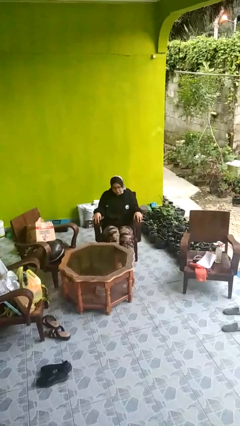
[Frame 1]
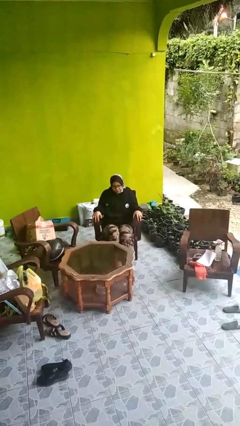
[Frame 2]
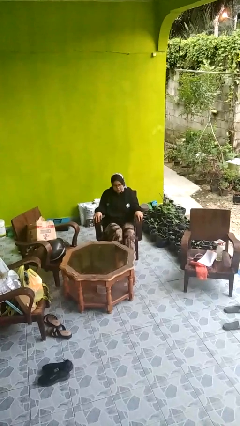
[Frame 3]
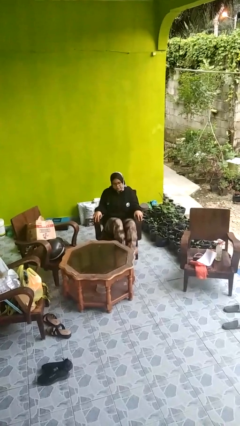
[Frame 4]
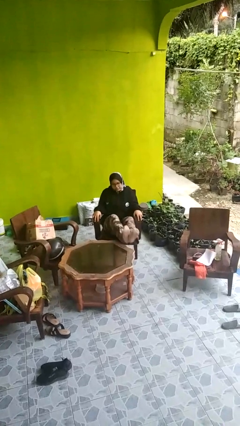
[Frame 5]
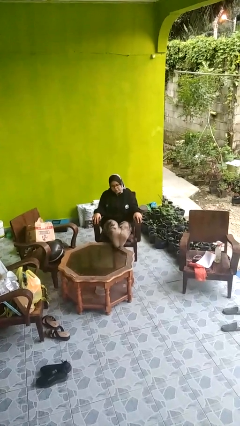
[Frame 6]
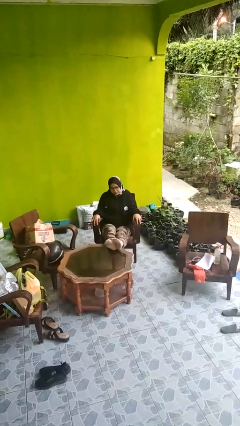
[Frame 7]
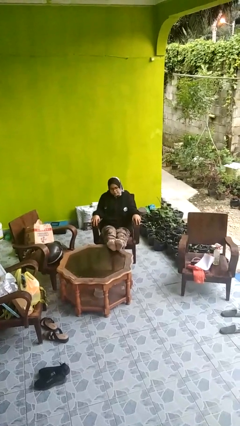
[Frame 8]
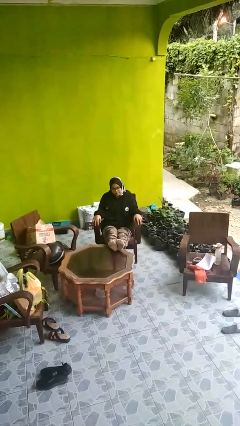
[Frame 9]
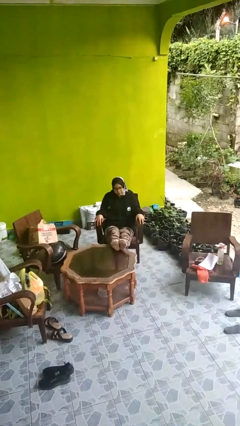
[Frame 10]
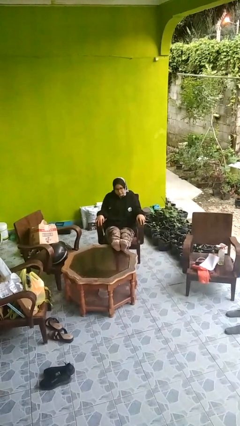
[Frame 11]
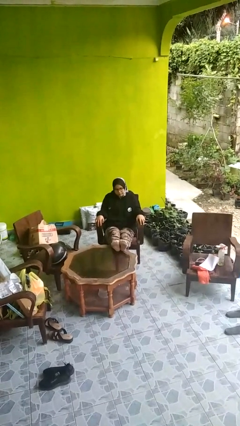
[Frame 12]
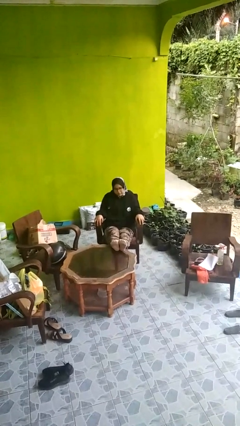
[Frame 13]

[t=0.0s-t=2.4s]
person puts feet up

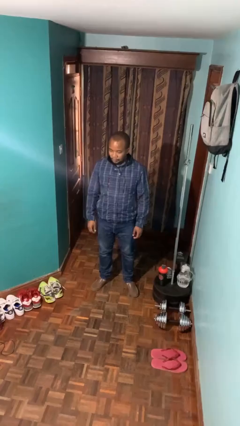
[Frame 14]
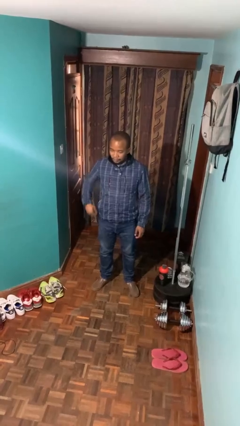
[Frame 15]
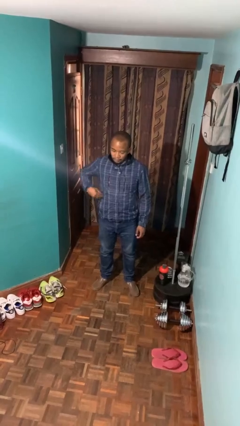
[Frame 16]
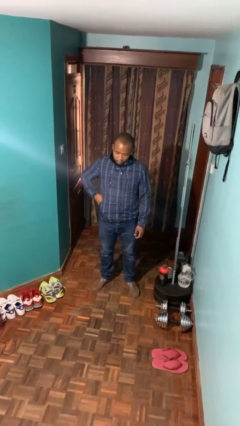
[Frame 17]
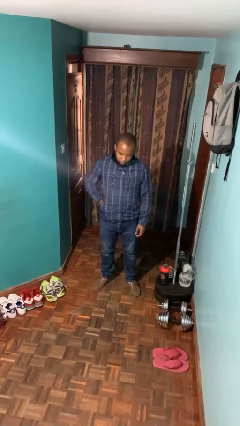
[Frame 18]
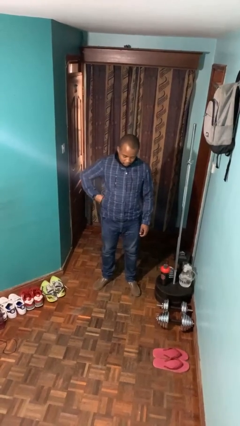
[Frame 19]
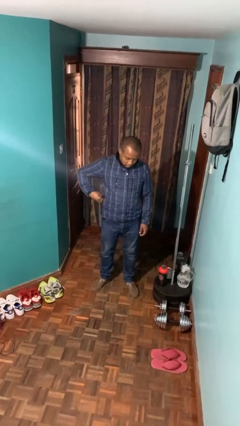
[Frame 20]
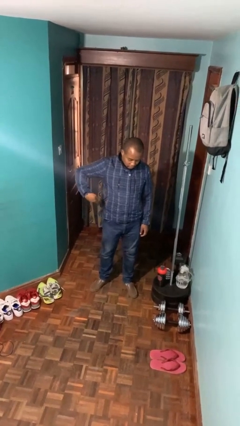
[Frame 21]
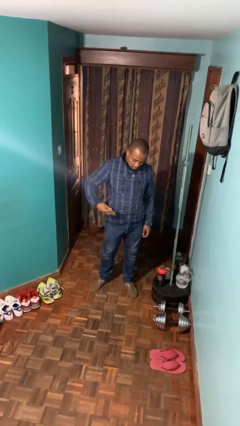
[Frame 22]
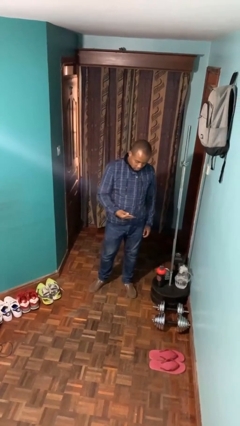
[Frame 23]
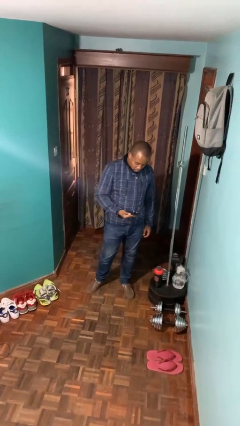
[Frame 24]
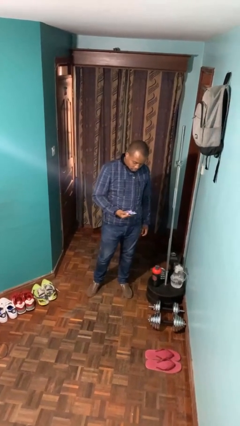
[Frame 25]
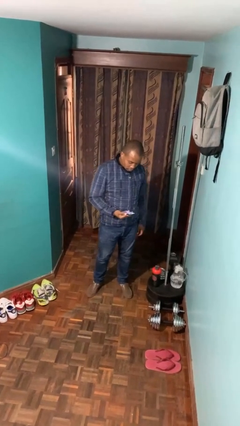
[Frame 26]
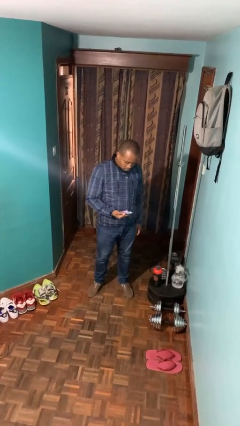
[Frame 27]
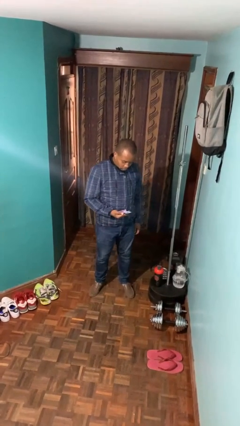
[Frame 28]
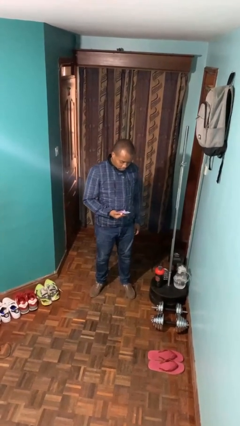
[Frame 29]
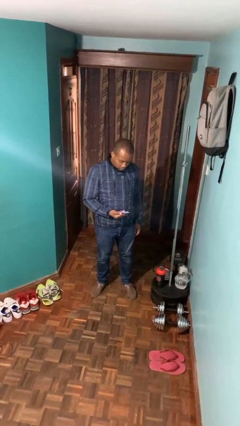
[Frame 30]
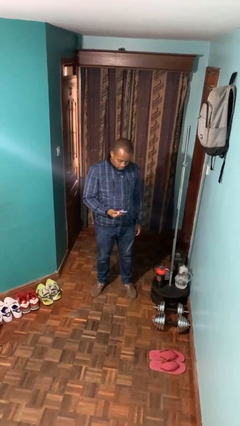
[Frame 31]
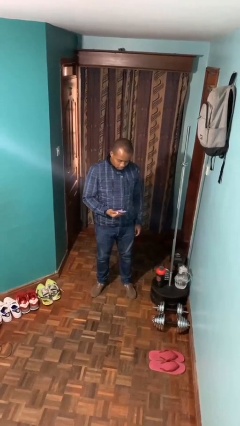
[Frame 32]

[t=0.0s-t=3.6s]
person takes phone from pocket

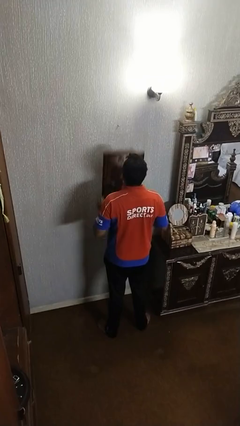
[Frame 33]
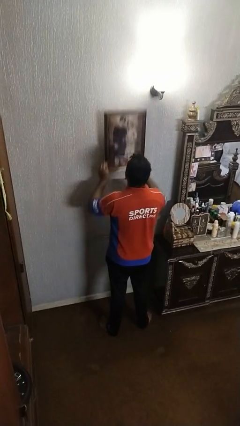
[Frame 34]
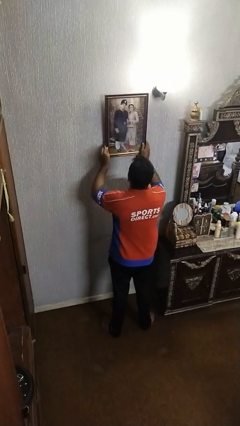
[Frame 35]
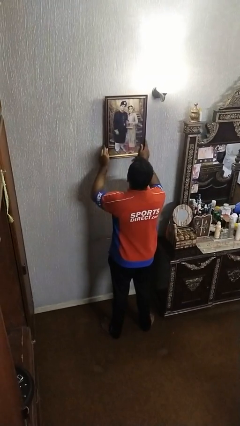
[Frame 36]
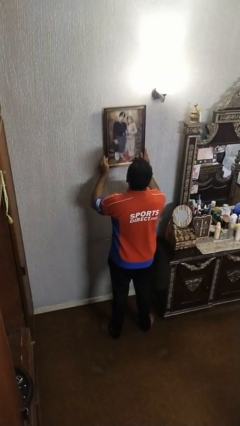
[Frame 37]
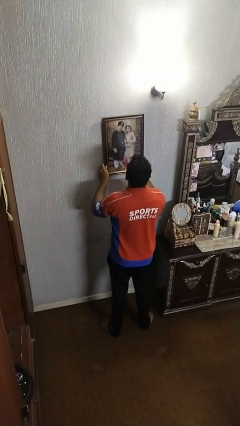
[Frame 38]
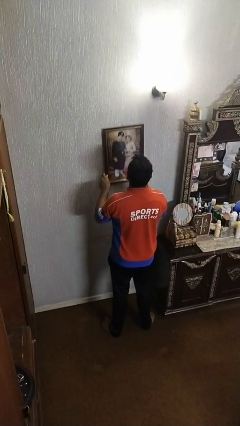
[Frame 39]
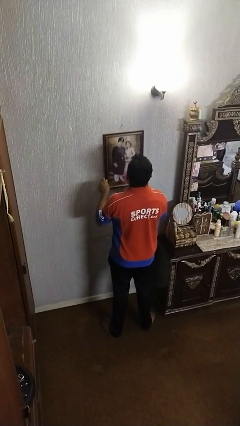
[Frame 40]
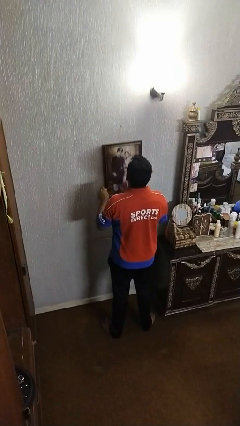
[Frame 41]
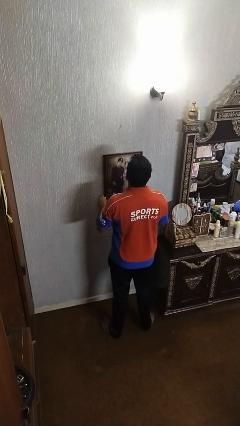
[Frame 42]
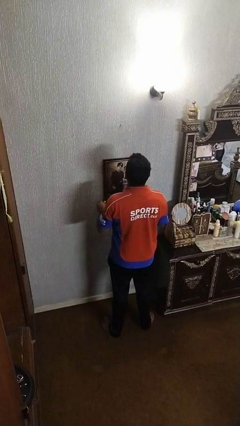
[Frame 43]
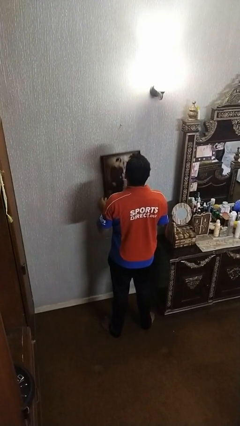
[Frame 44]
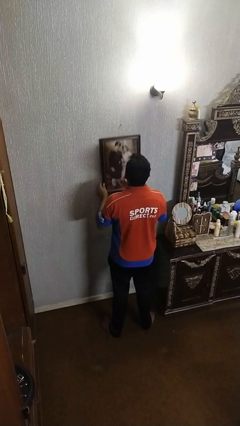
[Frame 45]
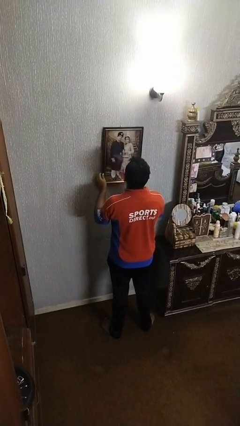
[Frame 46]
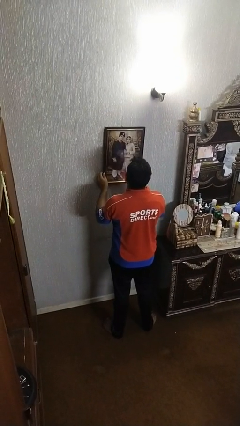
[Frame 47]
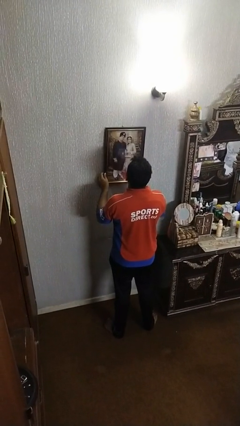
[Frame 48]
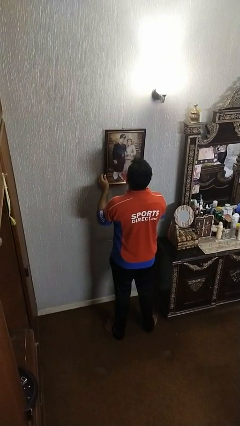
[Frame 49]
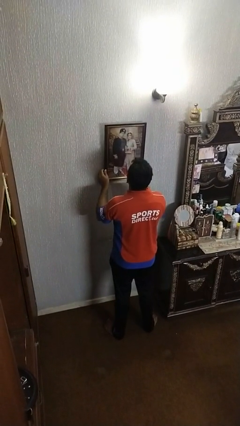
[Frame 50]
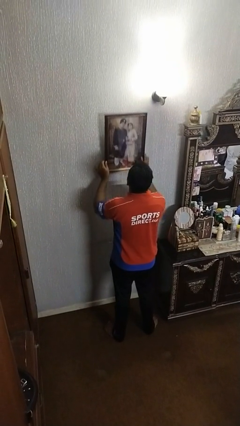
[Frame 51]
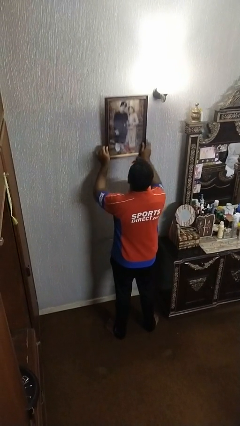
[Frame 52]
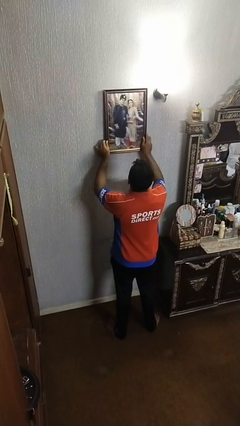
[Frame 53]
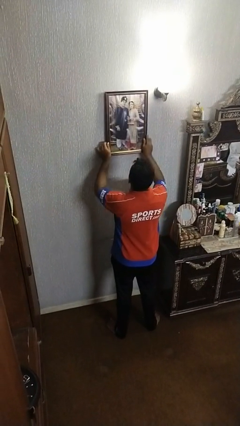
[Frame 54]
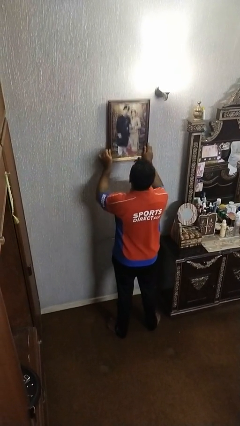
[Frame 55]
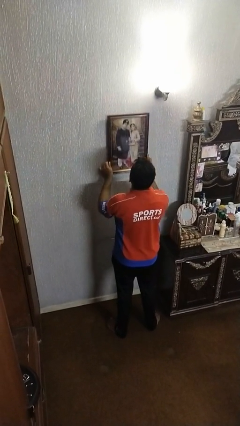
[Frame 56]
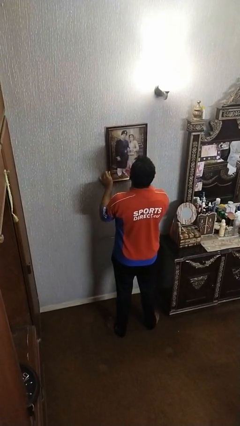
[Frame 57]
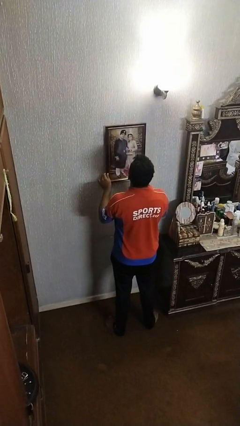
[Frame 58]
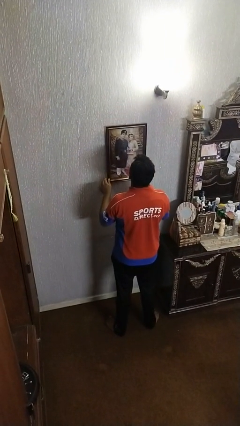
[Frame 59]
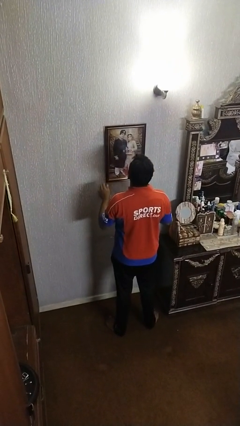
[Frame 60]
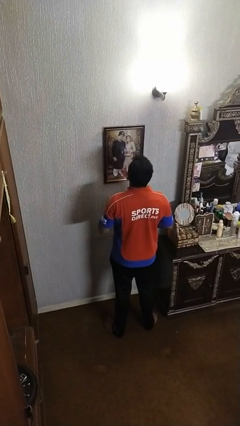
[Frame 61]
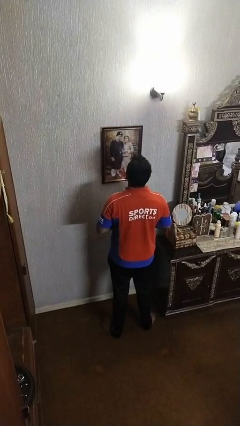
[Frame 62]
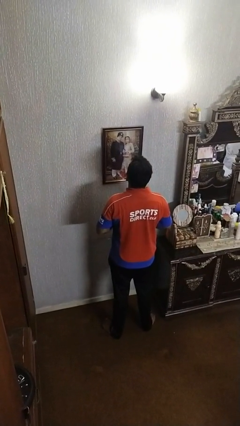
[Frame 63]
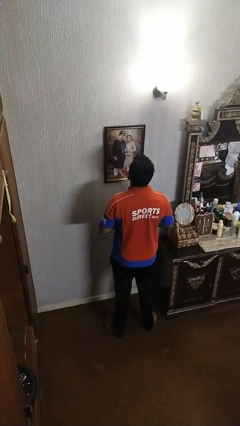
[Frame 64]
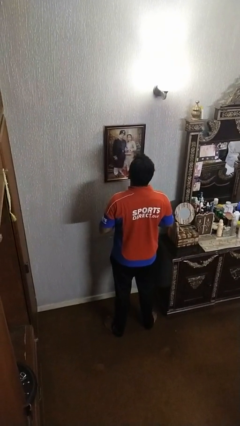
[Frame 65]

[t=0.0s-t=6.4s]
person puts up picture frame

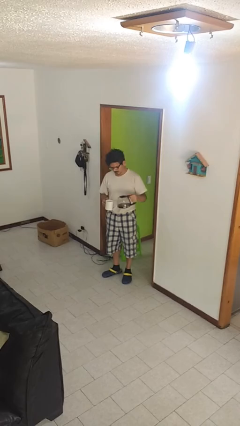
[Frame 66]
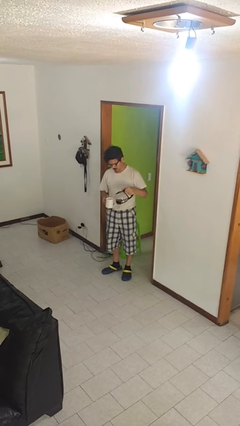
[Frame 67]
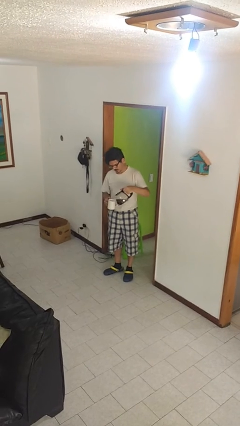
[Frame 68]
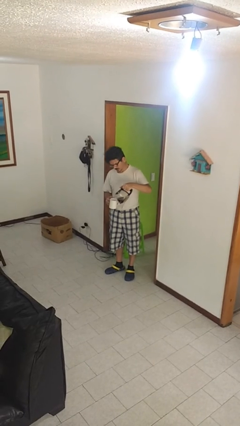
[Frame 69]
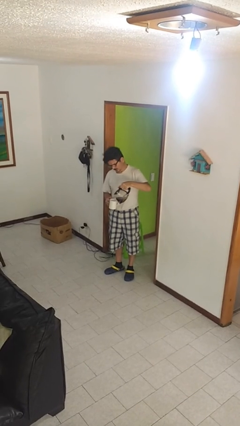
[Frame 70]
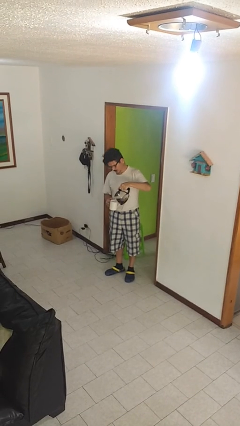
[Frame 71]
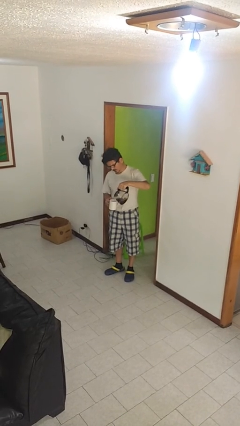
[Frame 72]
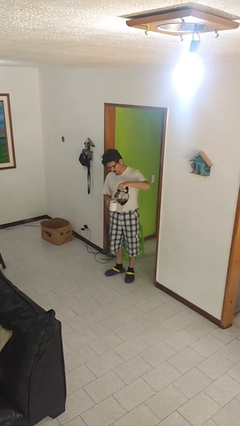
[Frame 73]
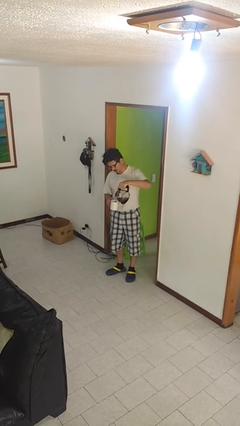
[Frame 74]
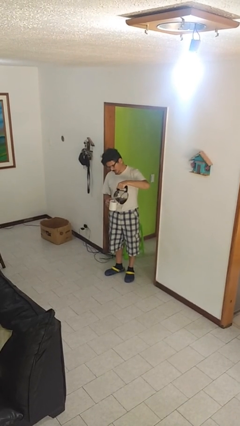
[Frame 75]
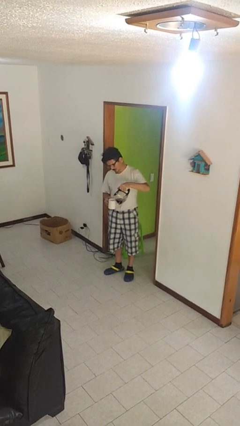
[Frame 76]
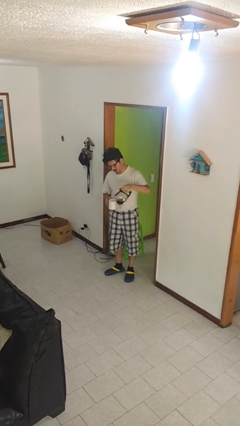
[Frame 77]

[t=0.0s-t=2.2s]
person pours coffee into mug

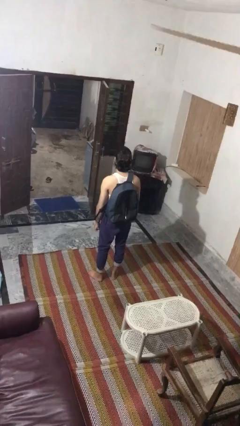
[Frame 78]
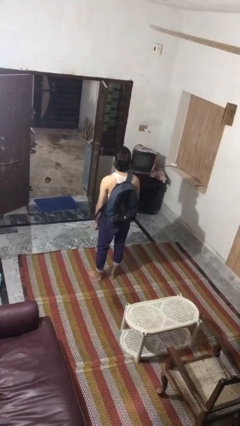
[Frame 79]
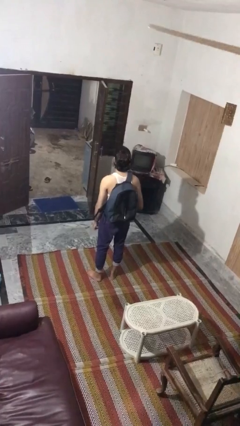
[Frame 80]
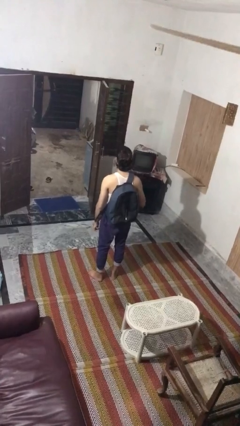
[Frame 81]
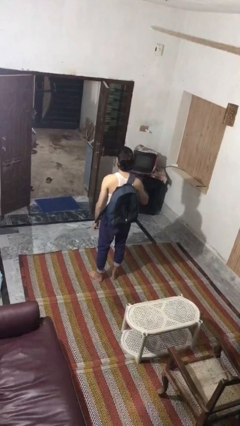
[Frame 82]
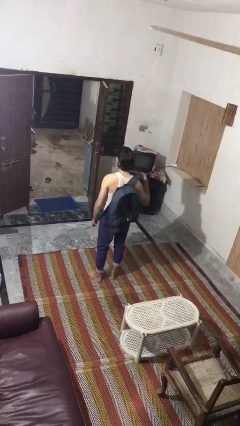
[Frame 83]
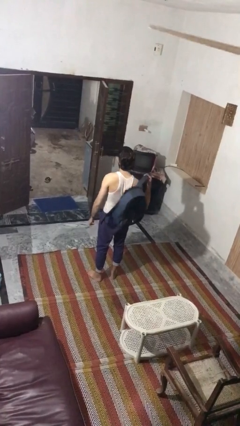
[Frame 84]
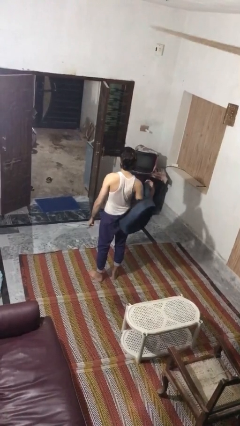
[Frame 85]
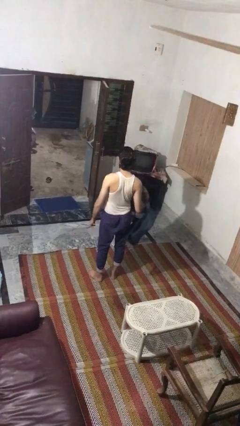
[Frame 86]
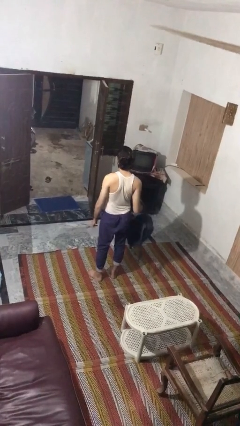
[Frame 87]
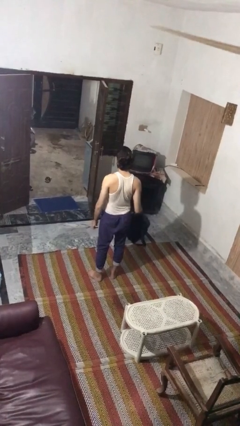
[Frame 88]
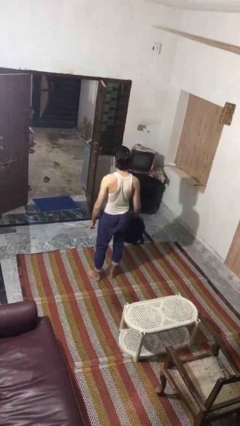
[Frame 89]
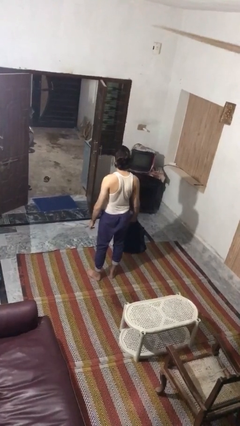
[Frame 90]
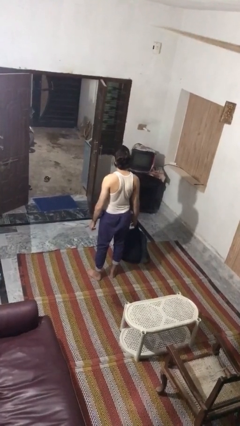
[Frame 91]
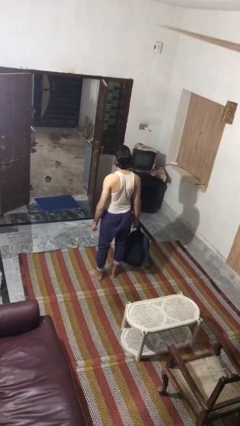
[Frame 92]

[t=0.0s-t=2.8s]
person takes off backpack
